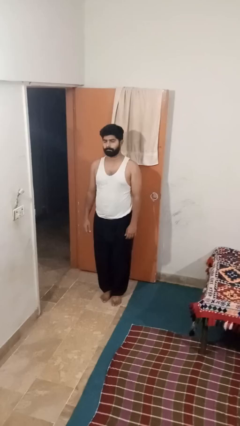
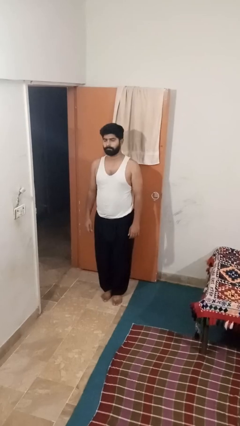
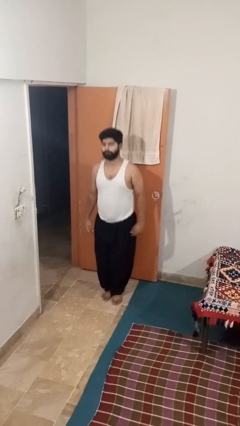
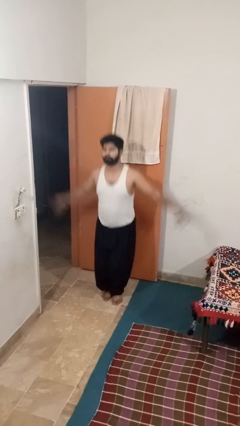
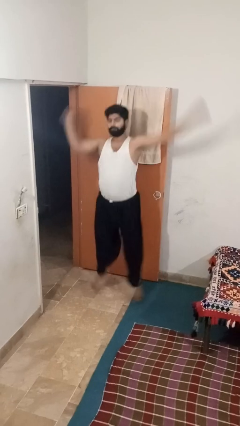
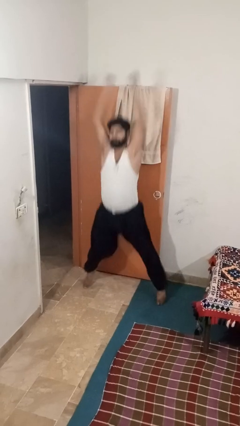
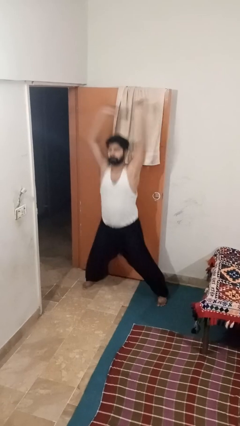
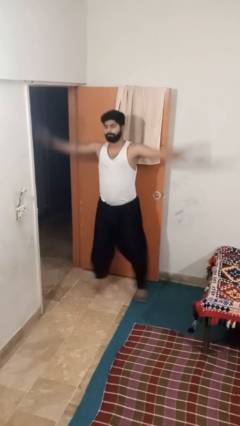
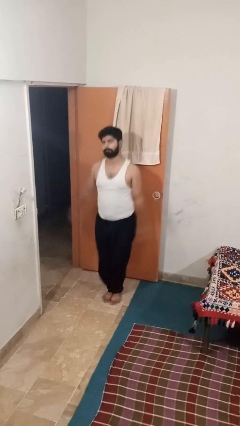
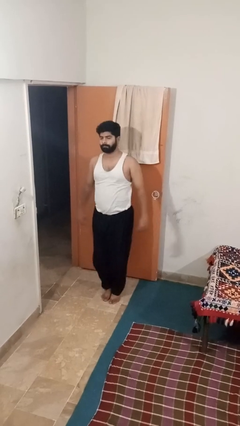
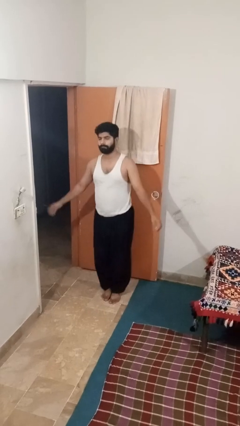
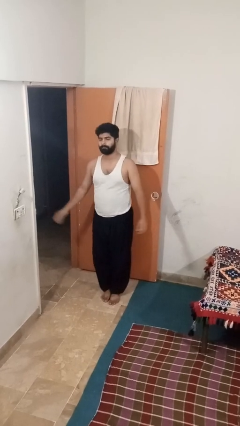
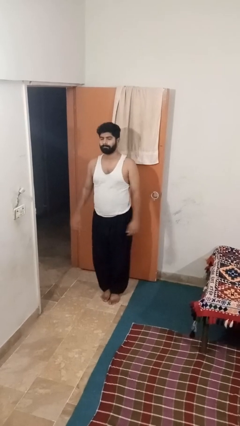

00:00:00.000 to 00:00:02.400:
person exercises with jumping jacks

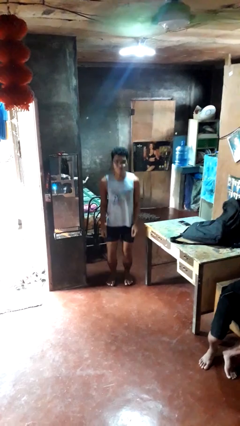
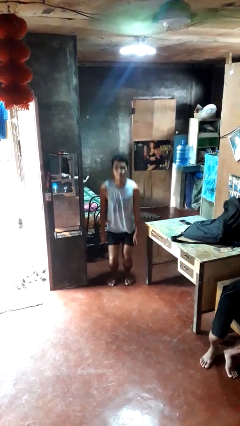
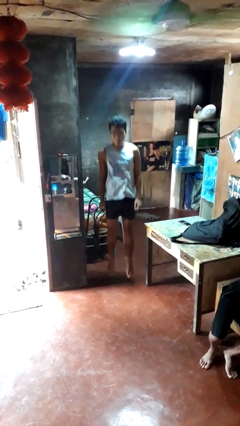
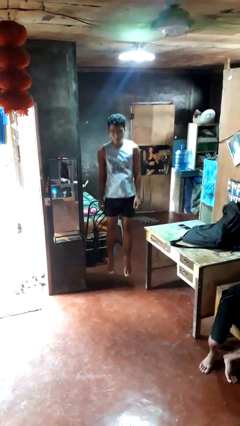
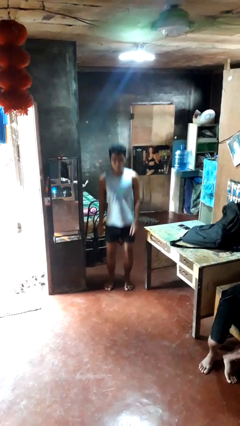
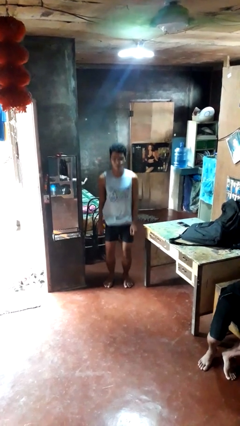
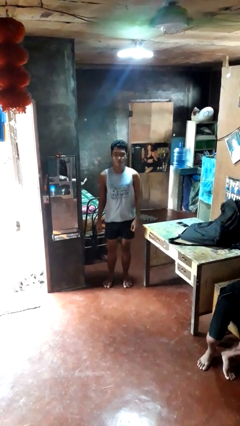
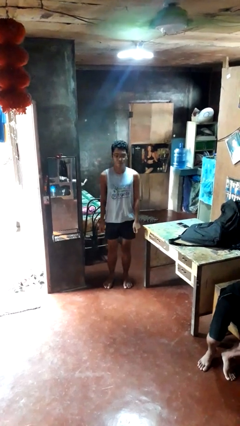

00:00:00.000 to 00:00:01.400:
person jumps

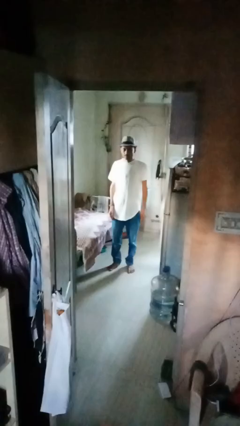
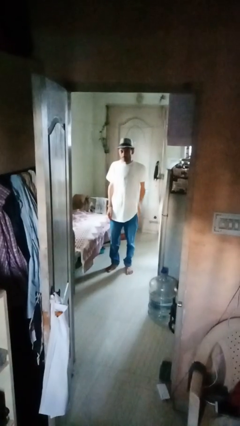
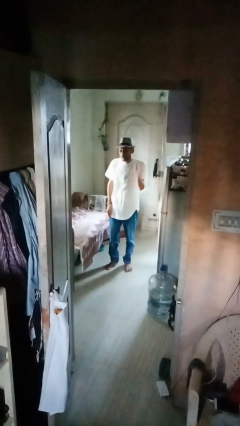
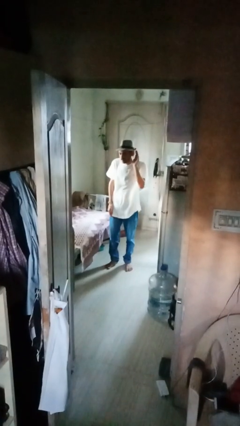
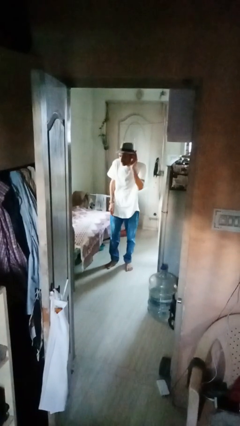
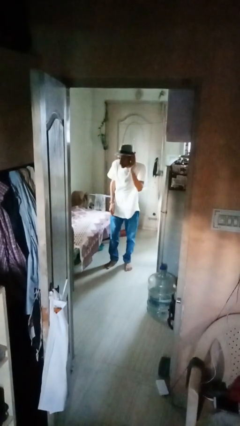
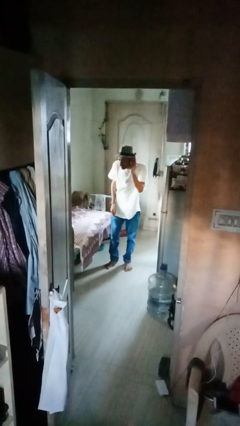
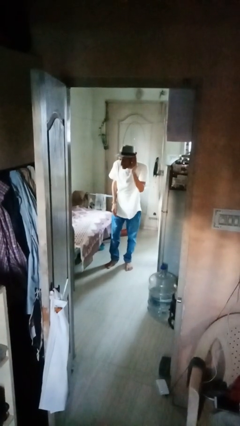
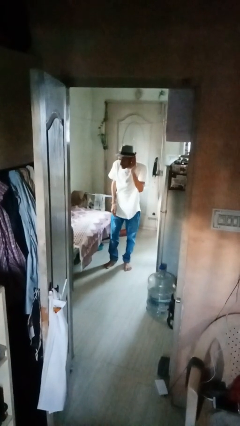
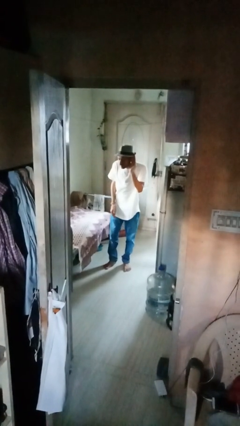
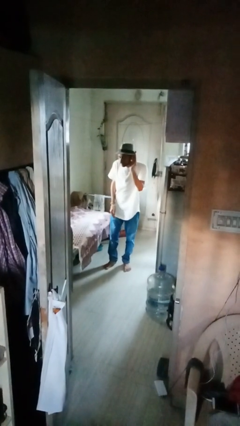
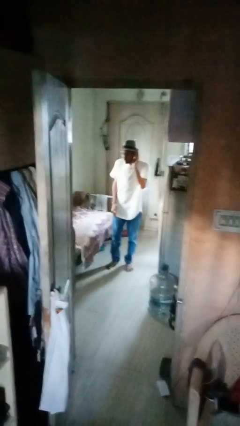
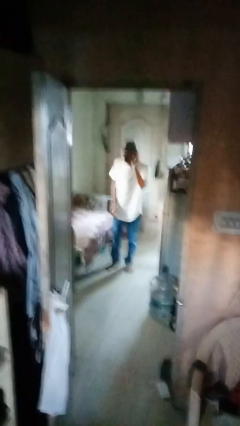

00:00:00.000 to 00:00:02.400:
person gestures listen closely

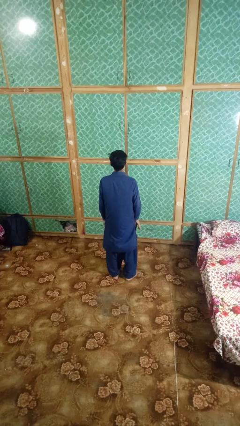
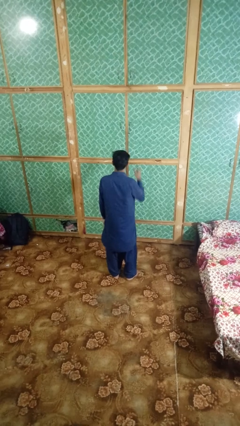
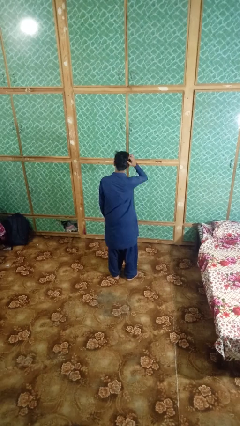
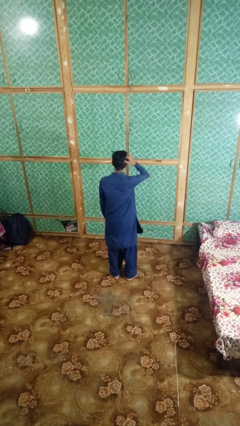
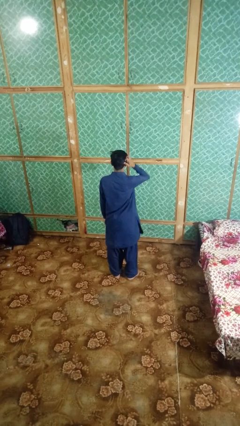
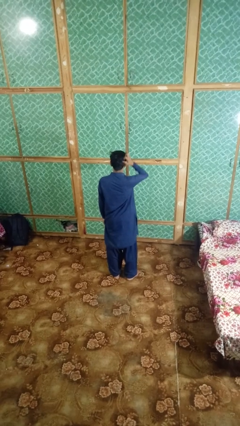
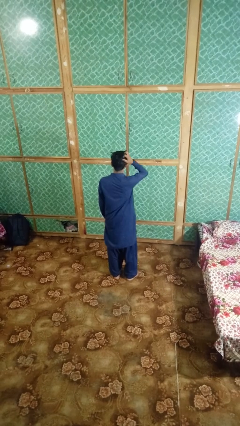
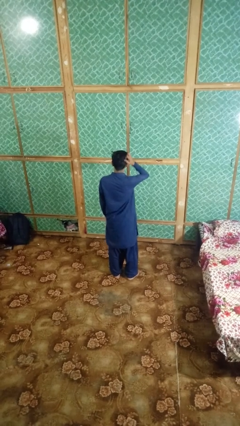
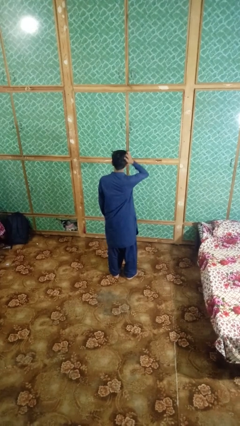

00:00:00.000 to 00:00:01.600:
person strokes hair

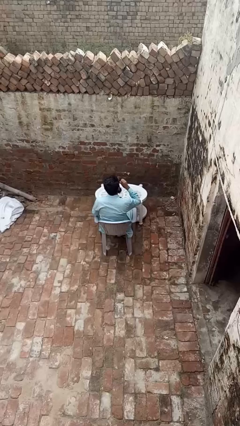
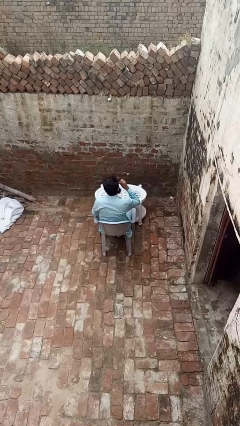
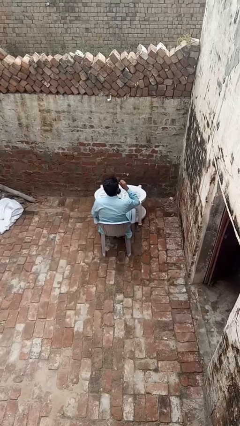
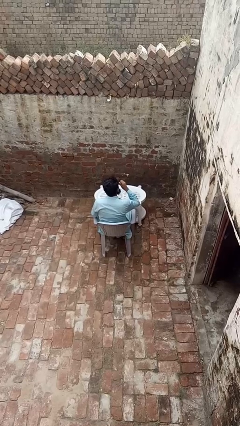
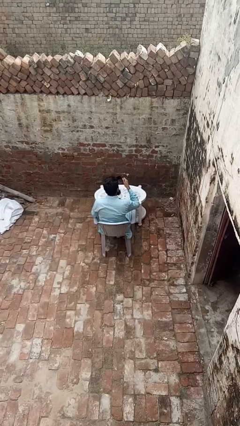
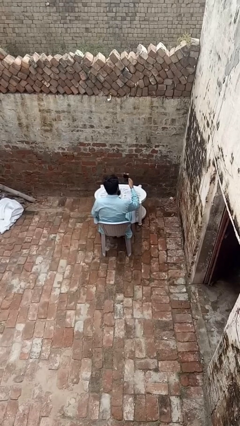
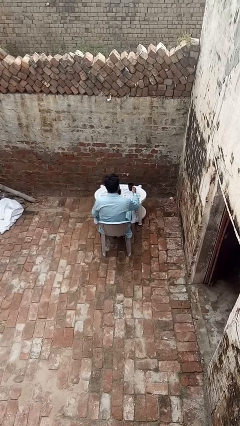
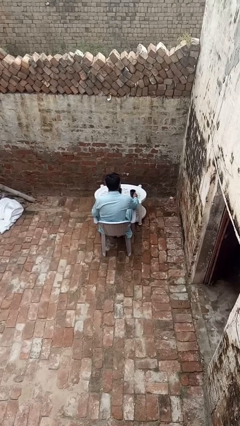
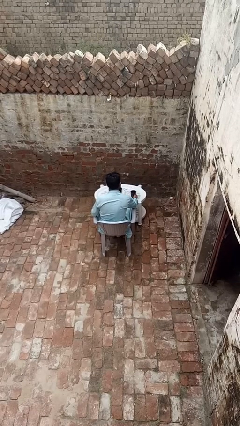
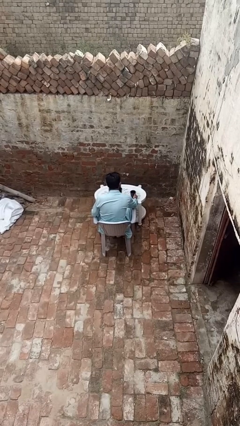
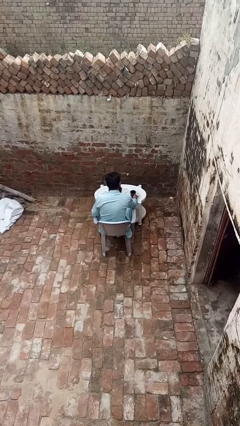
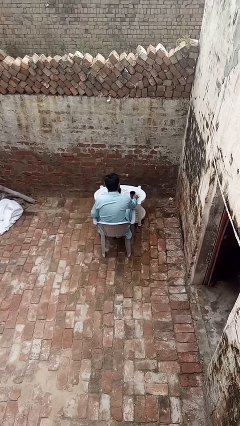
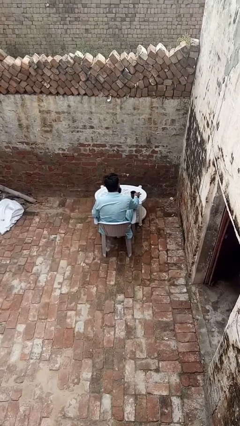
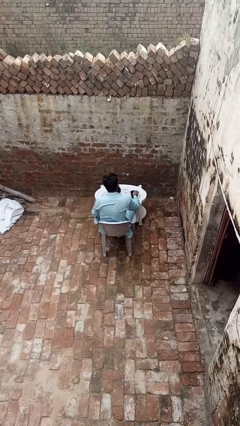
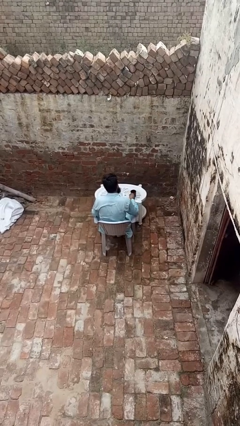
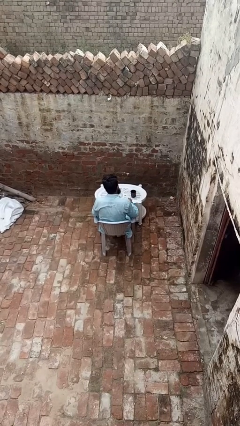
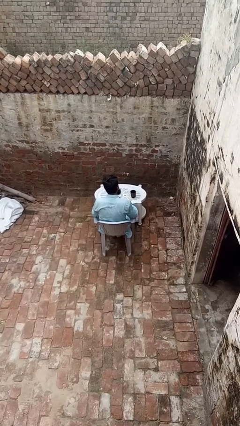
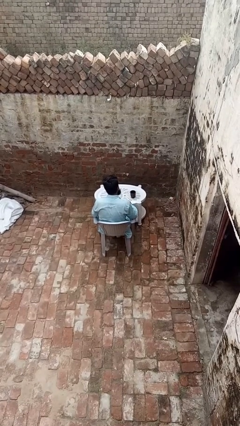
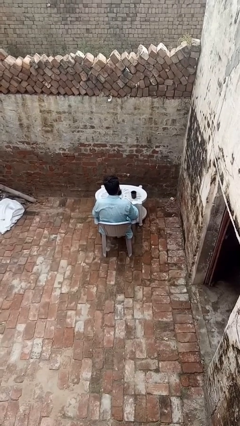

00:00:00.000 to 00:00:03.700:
person puts down object on table

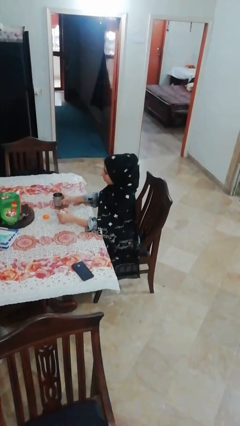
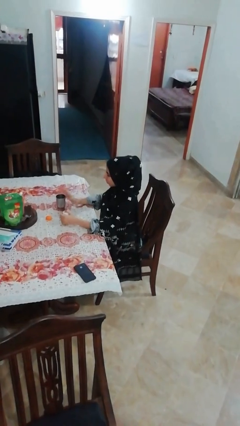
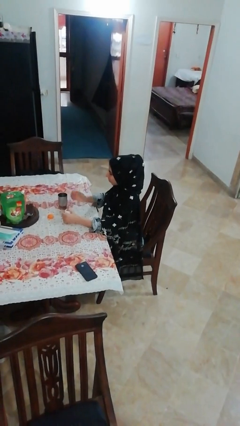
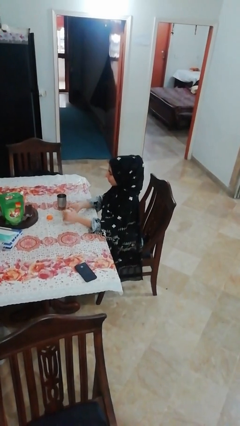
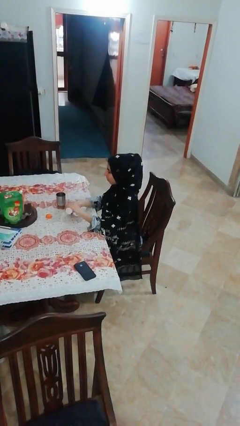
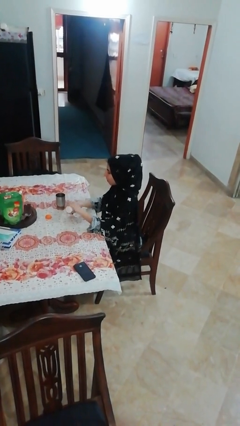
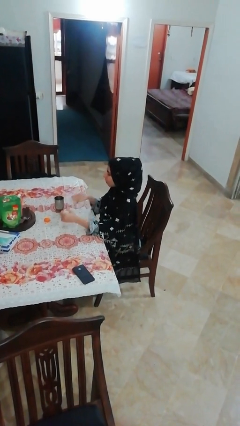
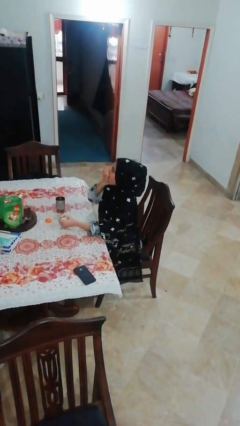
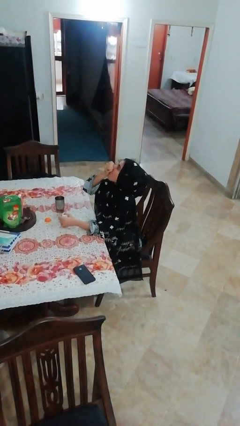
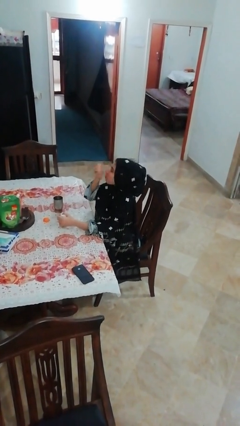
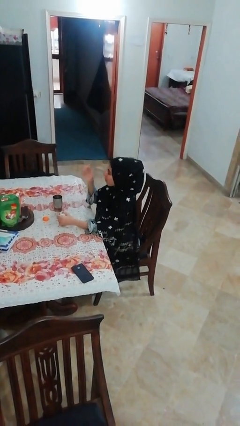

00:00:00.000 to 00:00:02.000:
person takes medicine pills

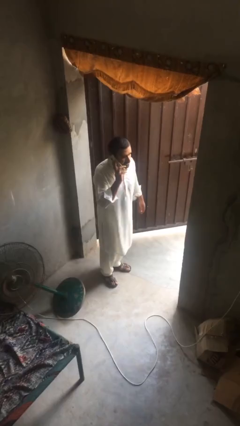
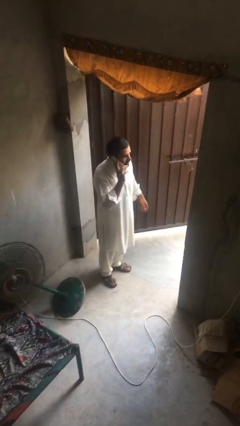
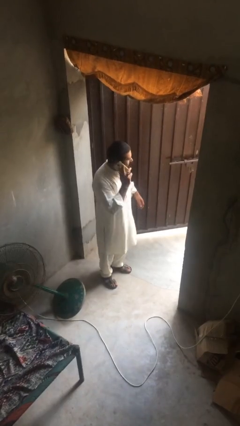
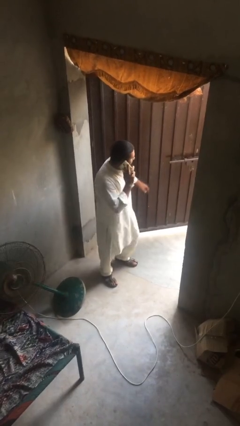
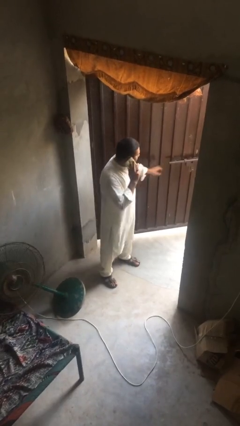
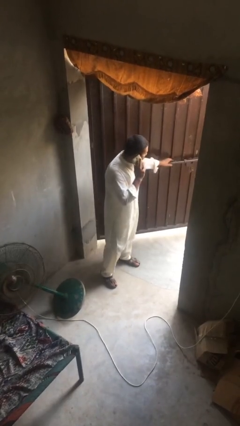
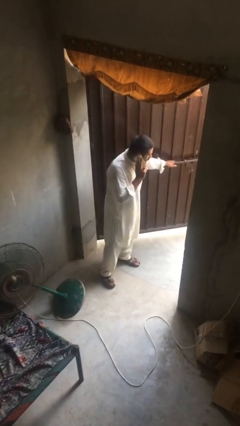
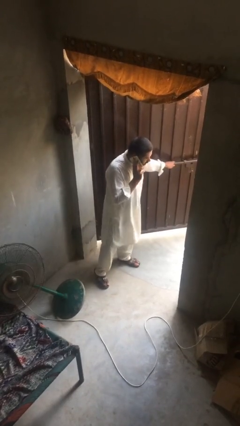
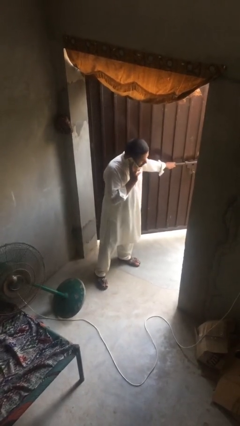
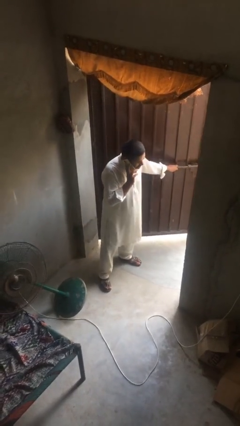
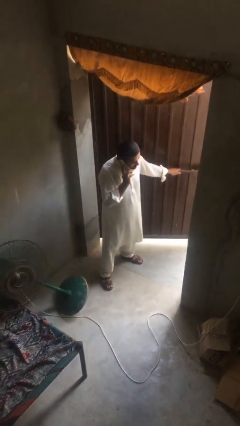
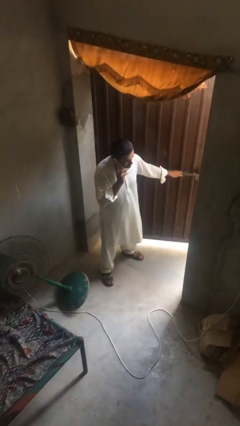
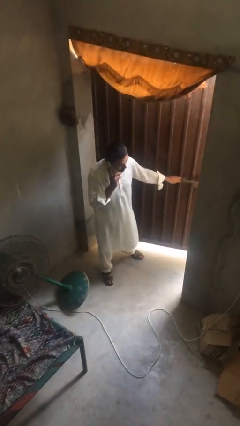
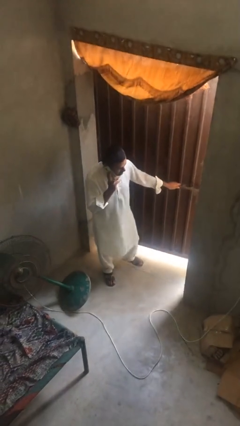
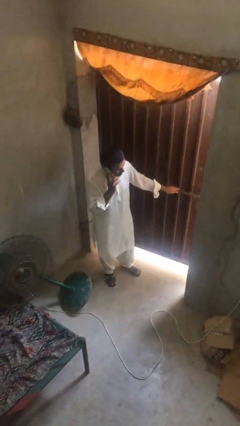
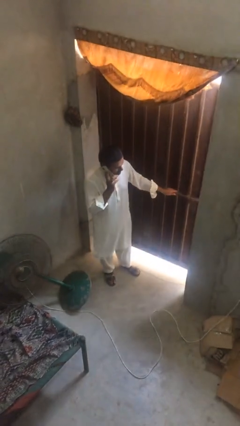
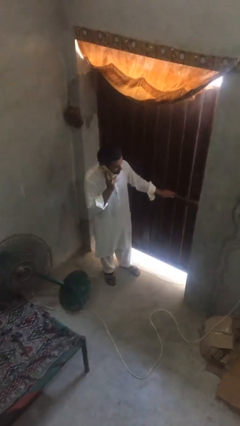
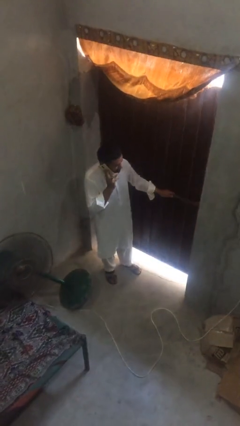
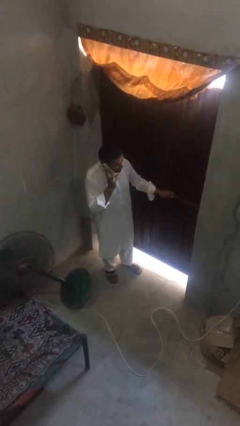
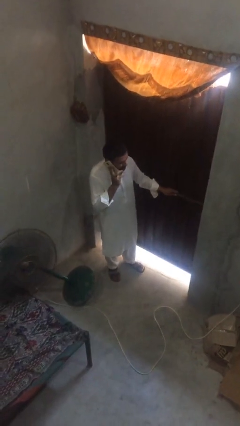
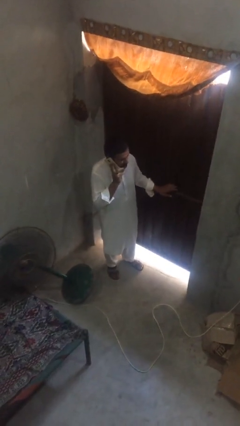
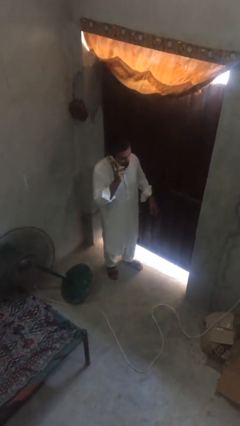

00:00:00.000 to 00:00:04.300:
person closes facility door
